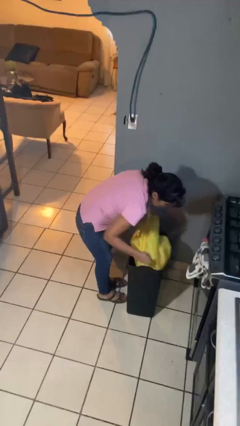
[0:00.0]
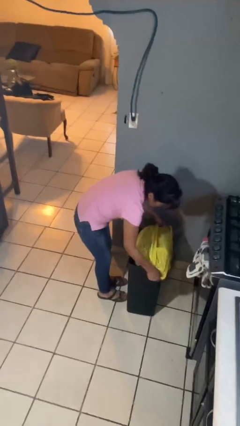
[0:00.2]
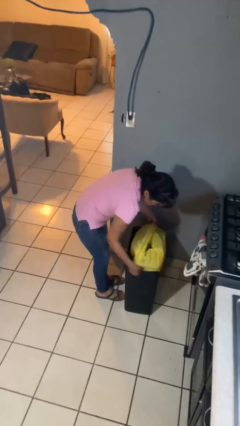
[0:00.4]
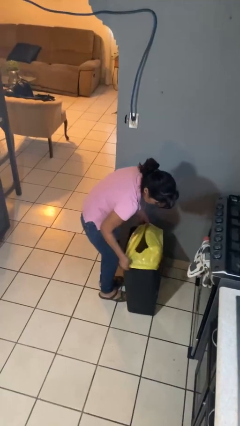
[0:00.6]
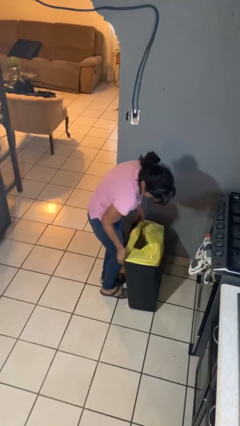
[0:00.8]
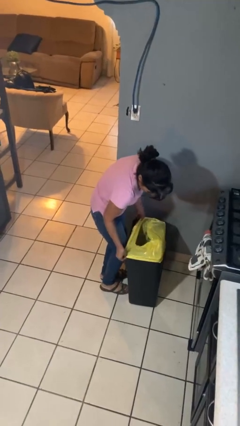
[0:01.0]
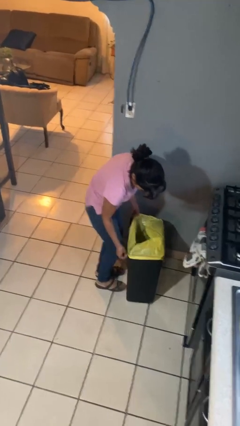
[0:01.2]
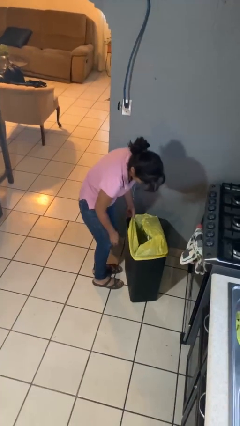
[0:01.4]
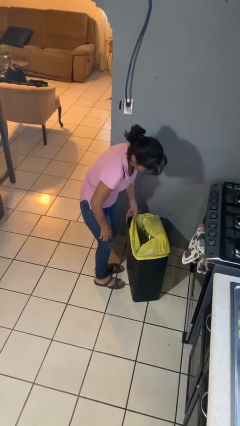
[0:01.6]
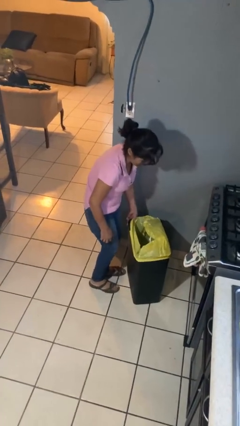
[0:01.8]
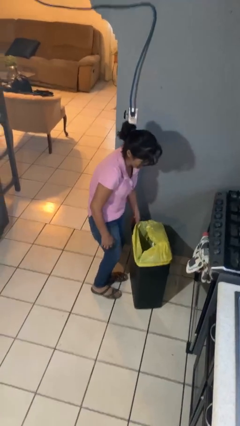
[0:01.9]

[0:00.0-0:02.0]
person inserts trashbag into trashcan

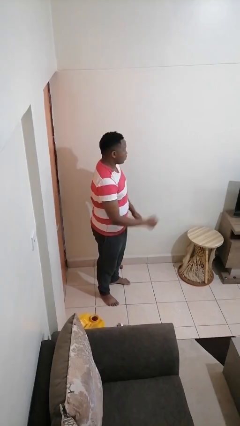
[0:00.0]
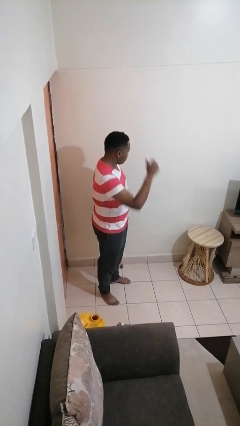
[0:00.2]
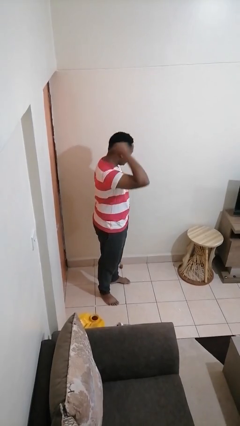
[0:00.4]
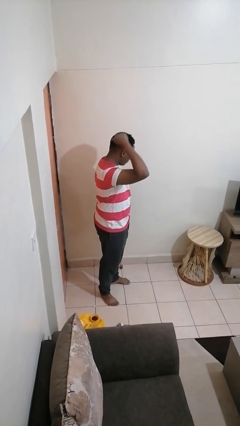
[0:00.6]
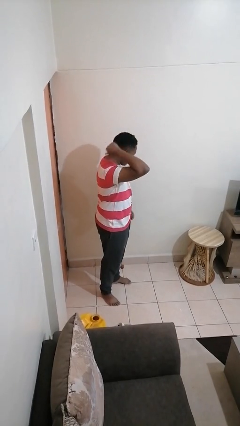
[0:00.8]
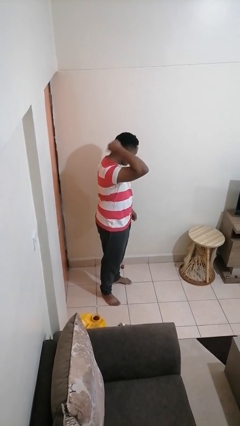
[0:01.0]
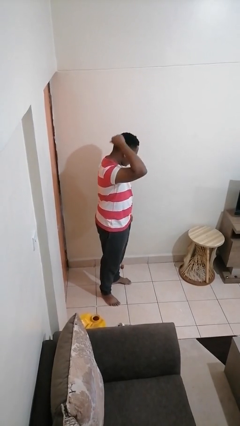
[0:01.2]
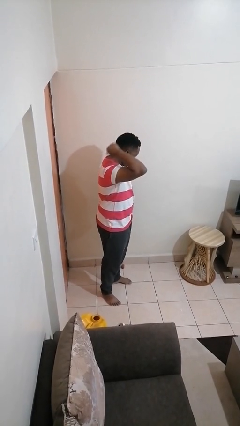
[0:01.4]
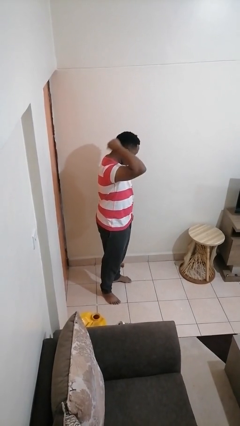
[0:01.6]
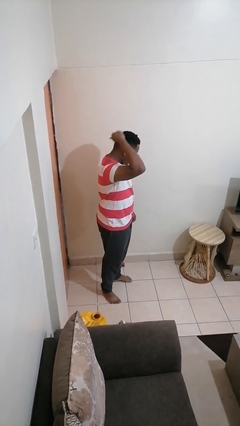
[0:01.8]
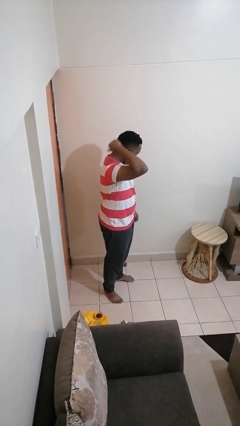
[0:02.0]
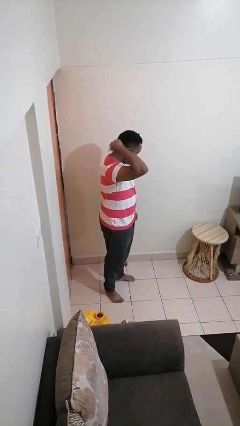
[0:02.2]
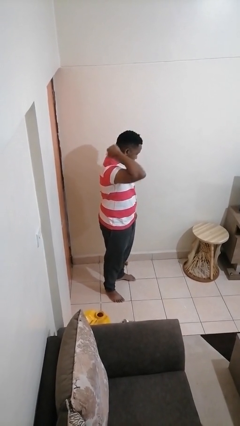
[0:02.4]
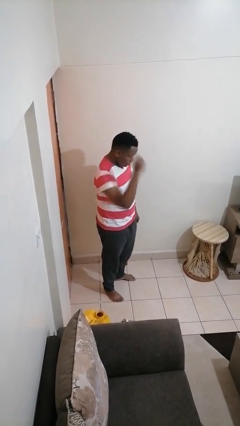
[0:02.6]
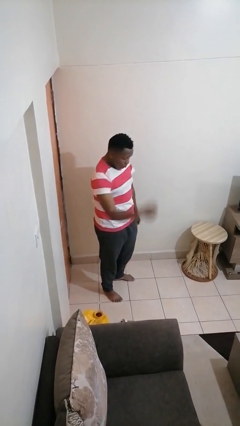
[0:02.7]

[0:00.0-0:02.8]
person gestures behind me

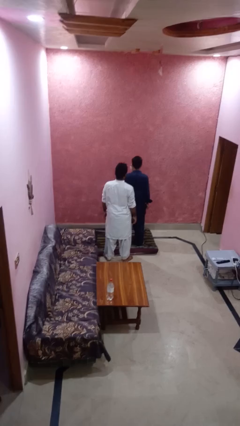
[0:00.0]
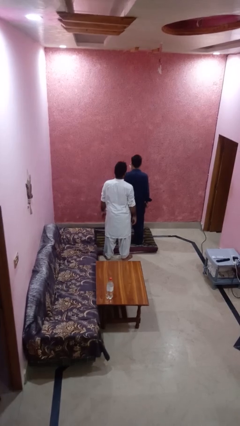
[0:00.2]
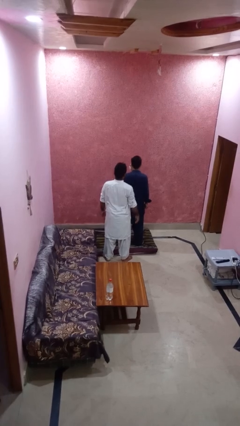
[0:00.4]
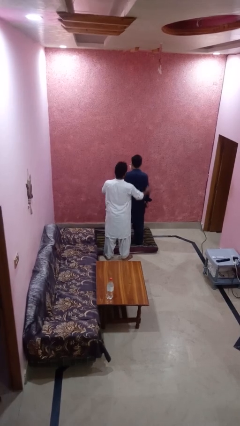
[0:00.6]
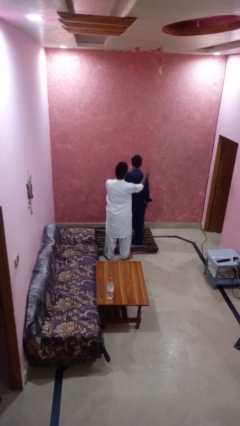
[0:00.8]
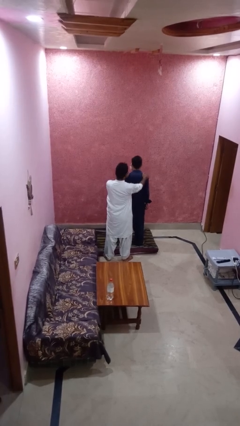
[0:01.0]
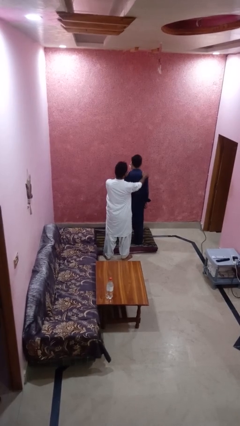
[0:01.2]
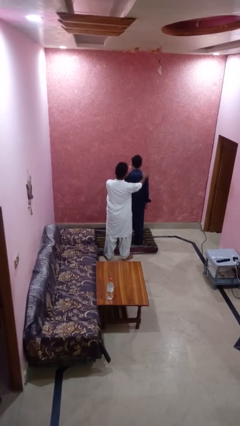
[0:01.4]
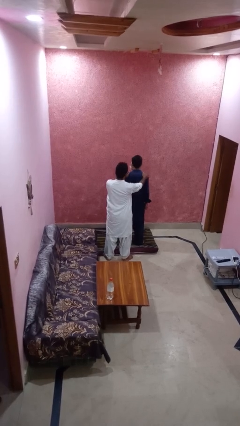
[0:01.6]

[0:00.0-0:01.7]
person grabs person by shoulder

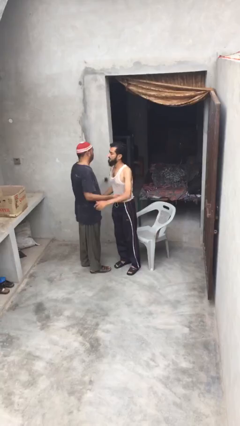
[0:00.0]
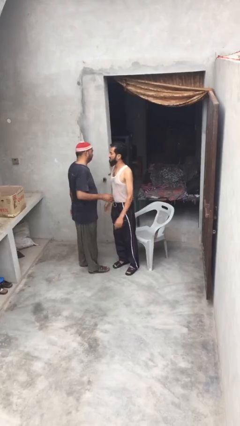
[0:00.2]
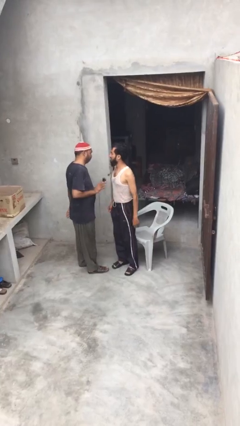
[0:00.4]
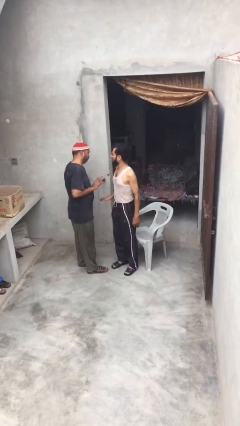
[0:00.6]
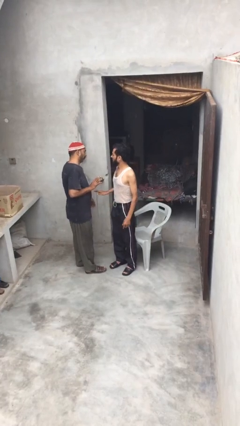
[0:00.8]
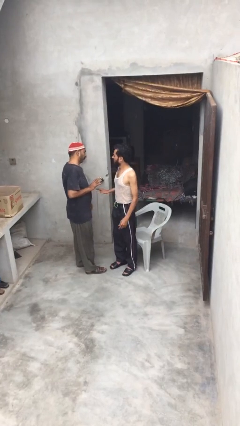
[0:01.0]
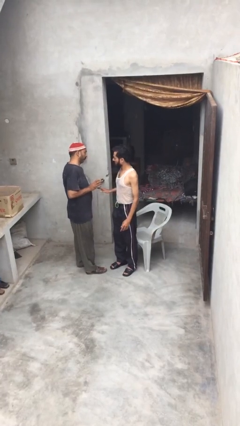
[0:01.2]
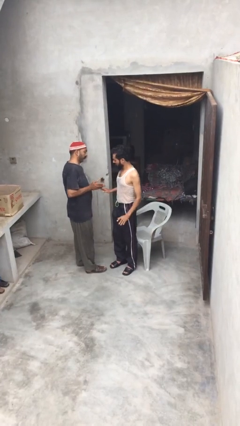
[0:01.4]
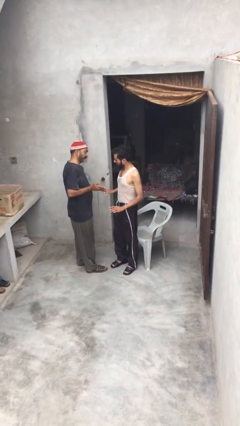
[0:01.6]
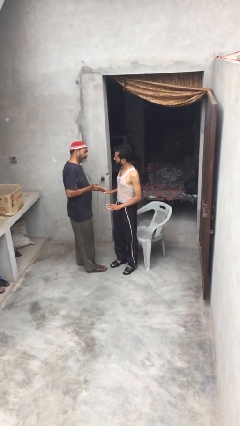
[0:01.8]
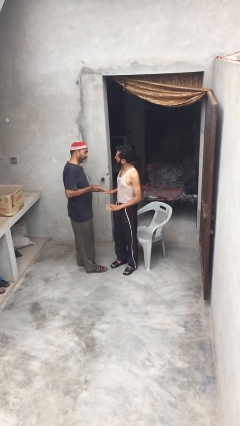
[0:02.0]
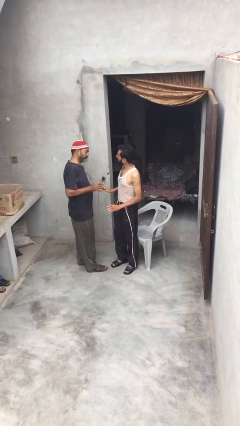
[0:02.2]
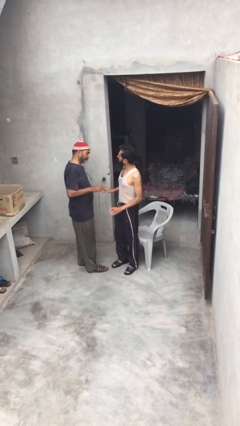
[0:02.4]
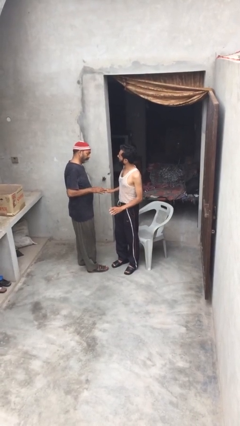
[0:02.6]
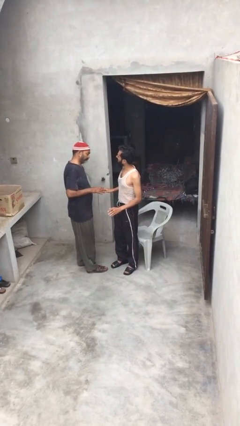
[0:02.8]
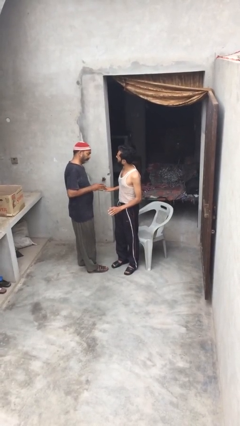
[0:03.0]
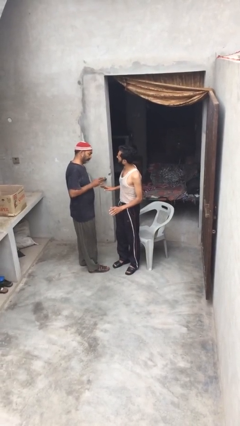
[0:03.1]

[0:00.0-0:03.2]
person talks to person

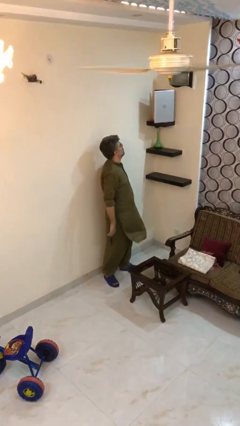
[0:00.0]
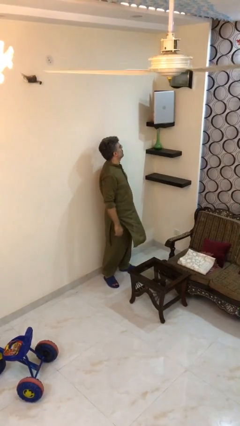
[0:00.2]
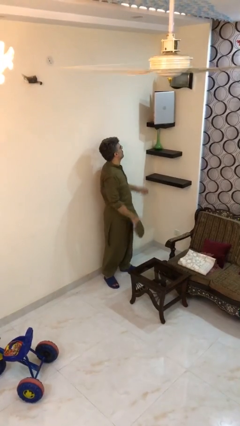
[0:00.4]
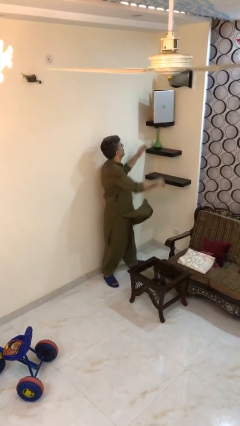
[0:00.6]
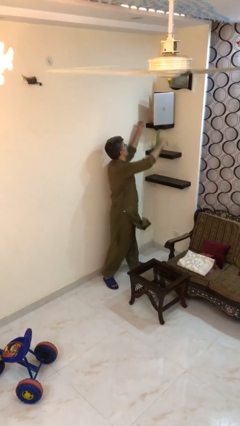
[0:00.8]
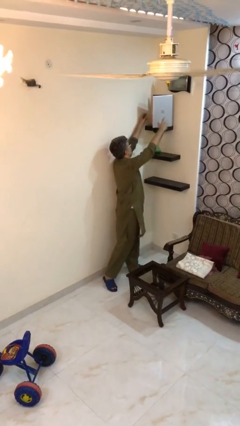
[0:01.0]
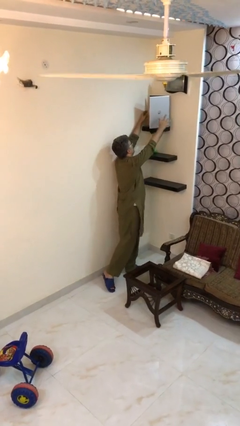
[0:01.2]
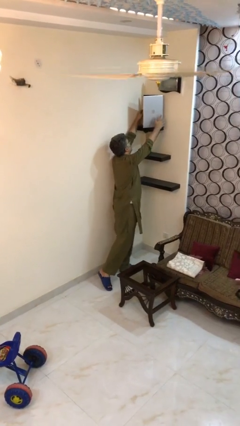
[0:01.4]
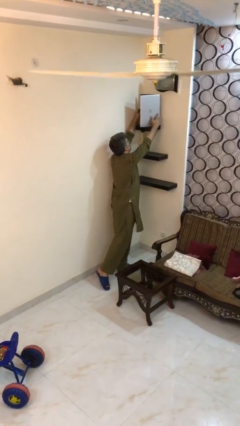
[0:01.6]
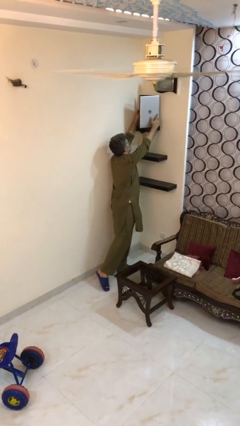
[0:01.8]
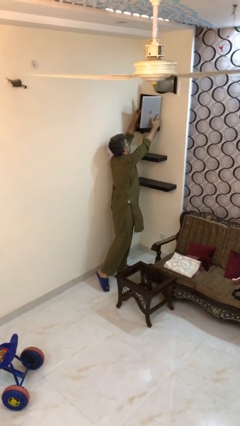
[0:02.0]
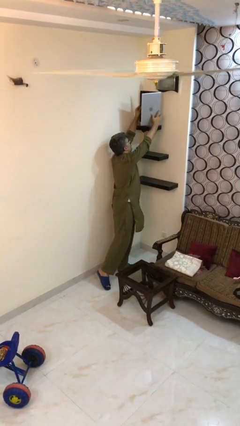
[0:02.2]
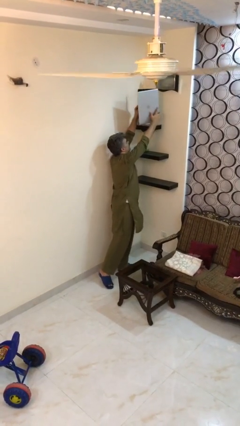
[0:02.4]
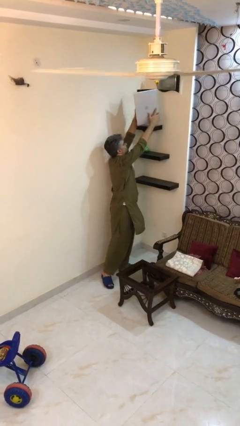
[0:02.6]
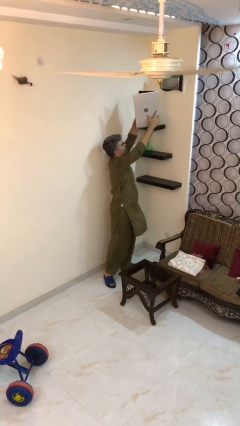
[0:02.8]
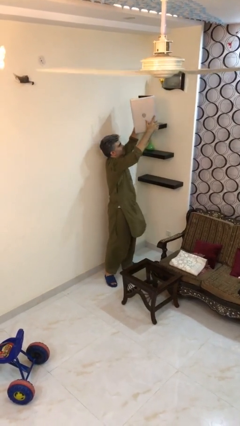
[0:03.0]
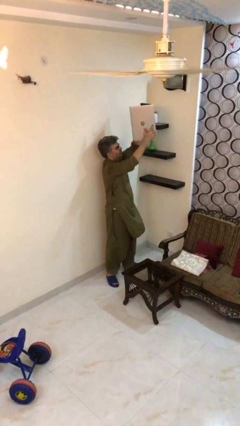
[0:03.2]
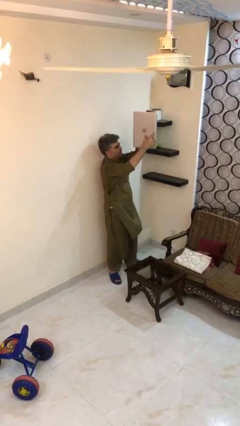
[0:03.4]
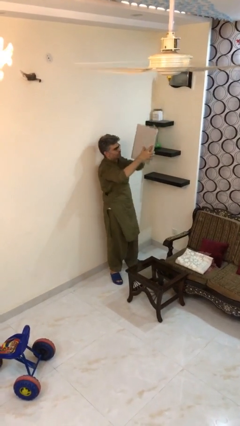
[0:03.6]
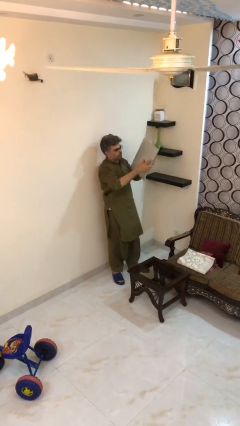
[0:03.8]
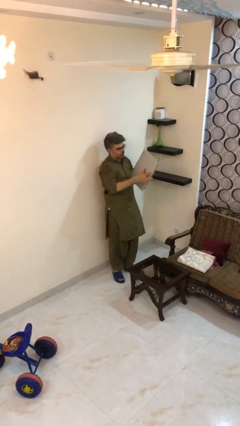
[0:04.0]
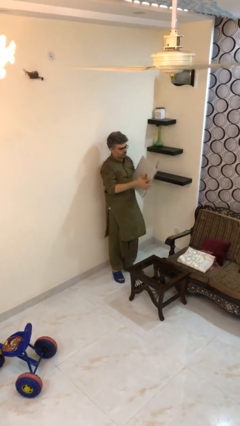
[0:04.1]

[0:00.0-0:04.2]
person picks up object from shelf

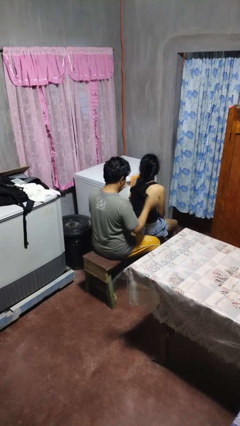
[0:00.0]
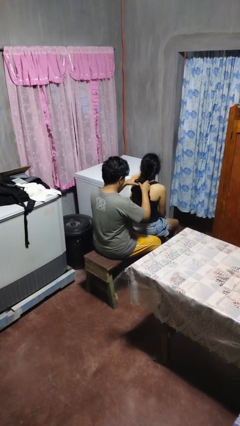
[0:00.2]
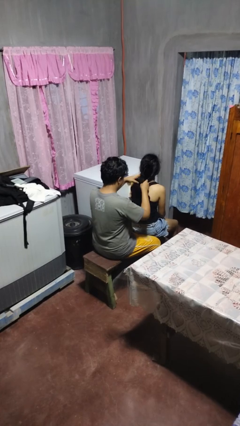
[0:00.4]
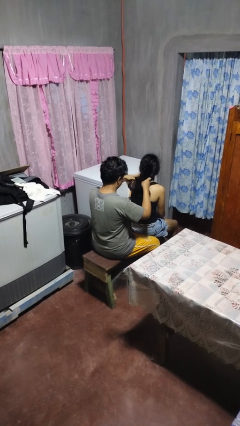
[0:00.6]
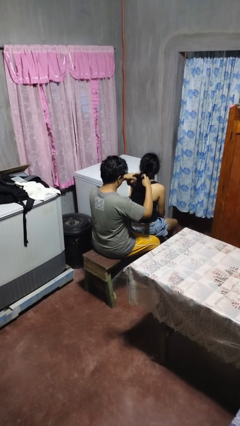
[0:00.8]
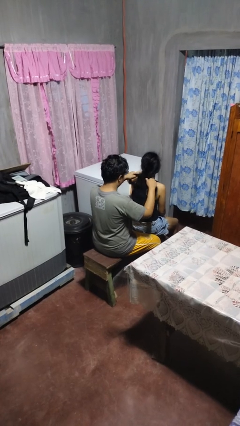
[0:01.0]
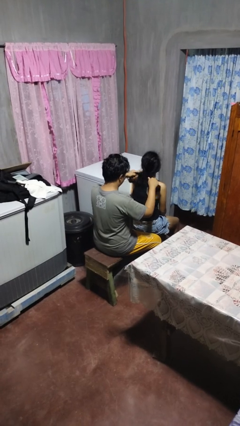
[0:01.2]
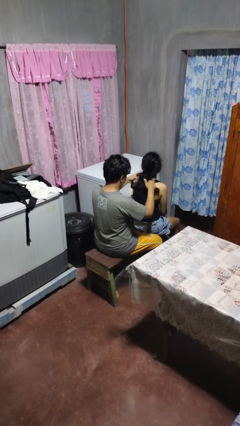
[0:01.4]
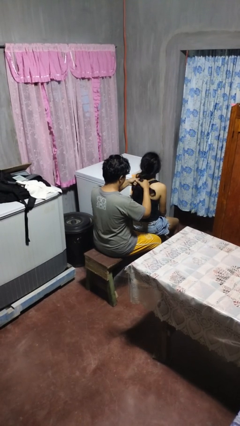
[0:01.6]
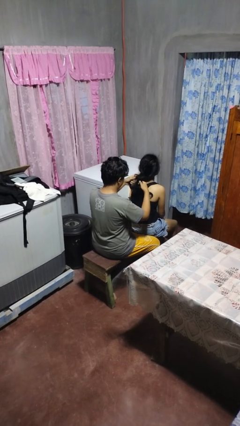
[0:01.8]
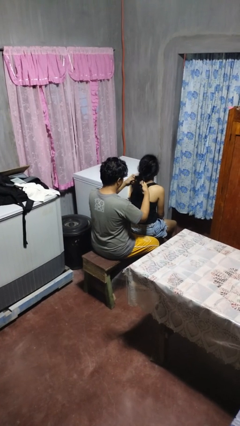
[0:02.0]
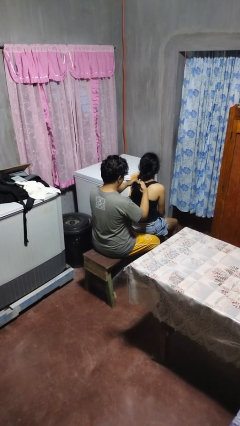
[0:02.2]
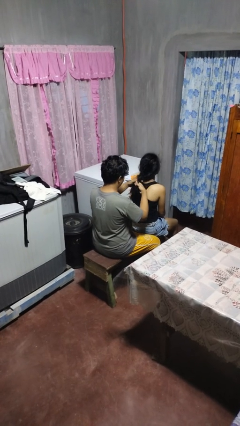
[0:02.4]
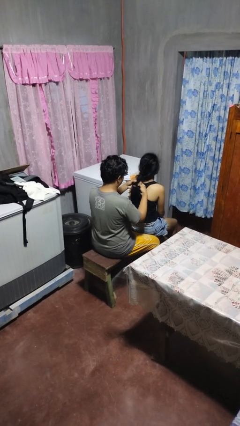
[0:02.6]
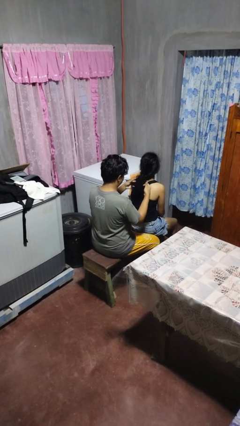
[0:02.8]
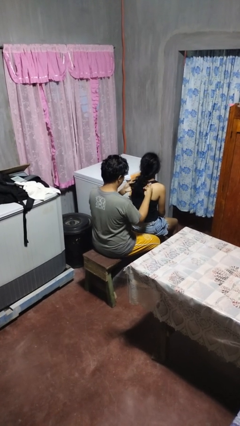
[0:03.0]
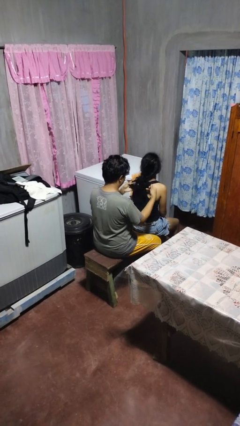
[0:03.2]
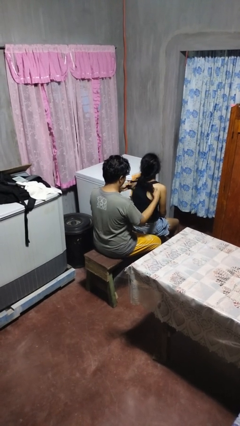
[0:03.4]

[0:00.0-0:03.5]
person braids hair of person
